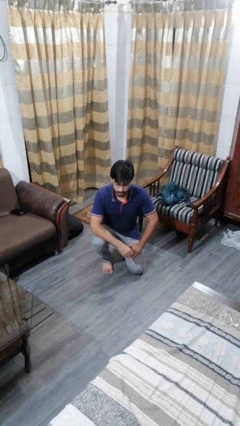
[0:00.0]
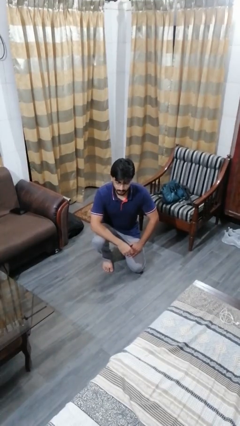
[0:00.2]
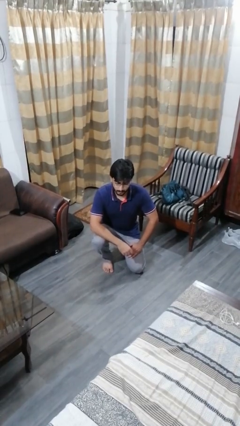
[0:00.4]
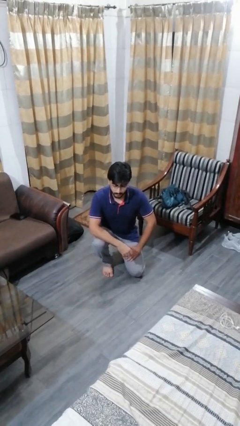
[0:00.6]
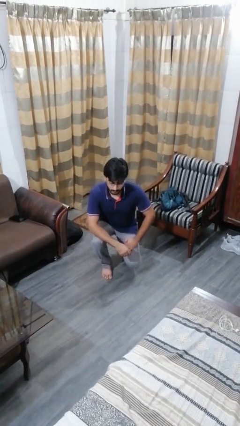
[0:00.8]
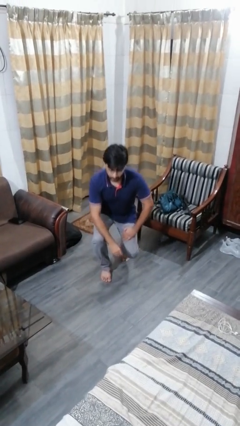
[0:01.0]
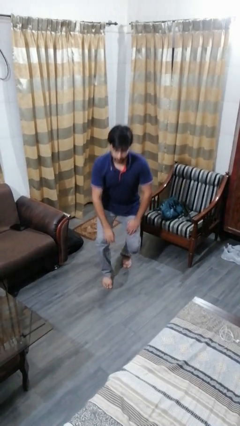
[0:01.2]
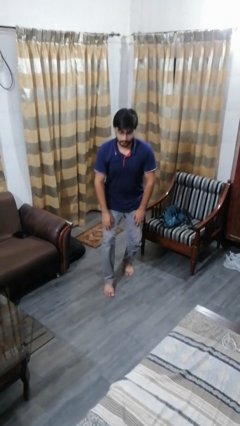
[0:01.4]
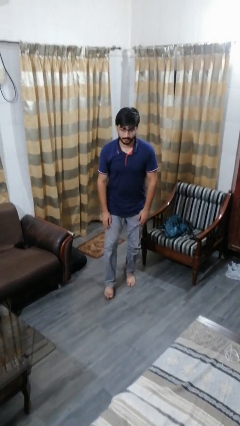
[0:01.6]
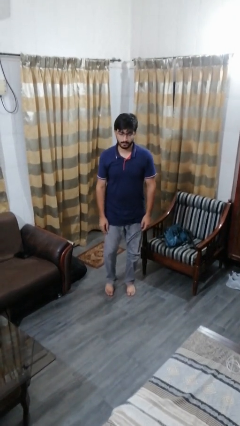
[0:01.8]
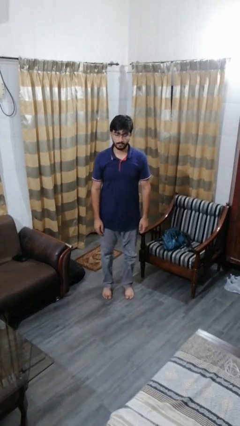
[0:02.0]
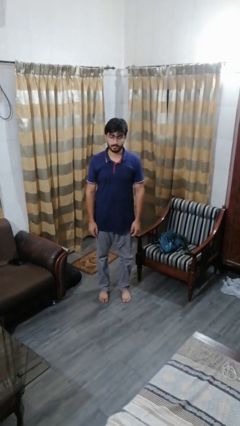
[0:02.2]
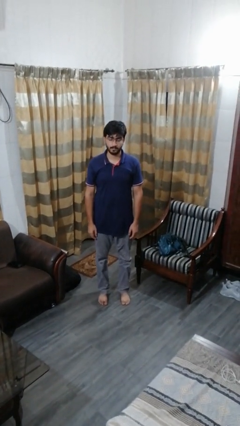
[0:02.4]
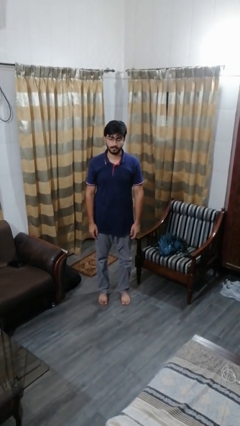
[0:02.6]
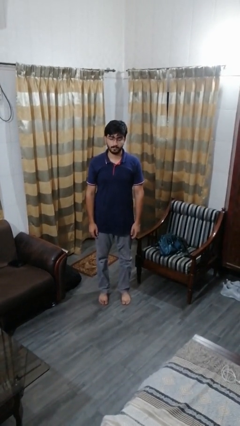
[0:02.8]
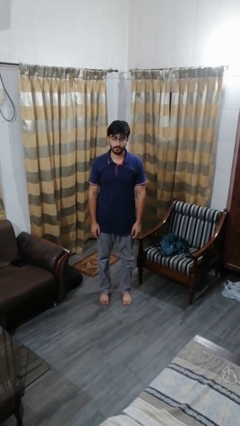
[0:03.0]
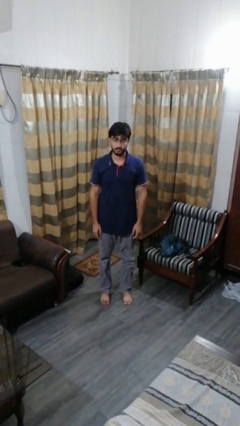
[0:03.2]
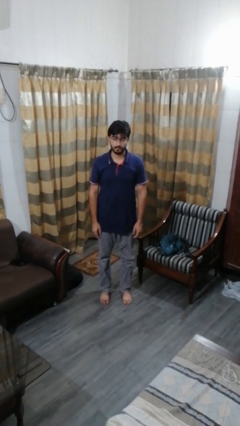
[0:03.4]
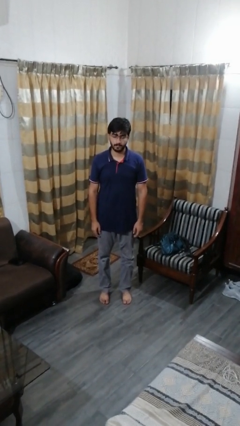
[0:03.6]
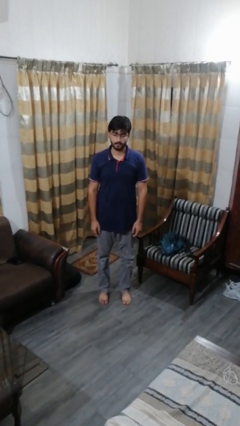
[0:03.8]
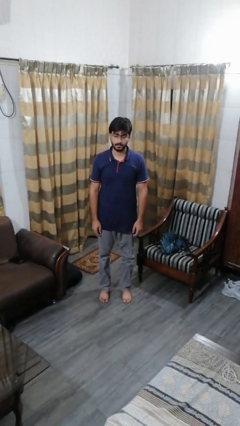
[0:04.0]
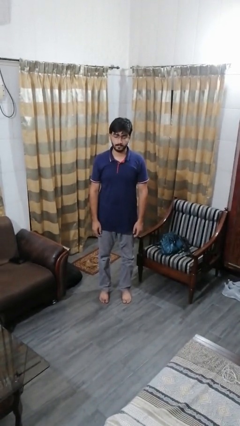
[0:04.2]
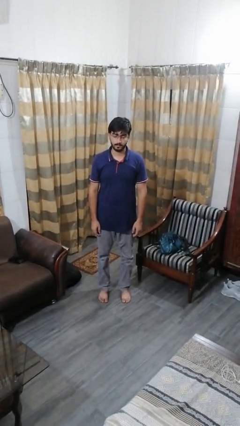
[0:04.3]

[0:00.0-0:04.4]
person stands up from floor

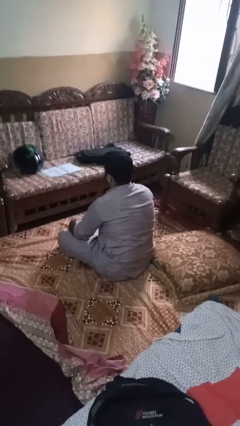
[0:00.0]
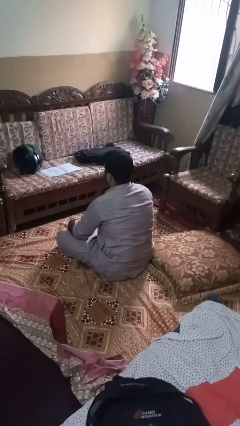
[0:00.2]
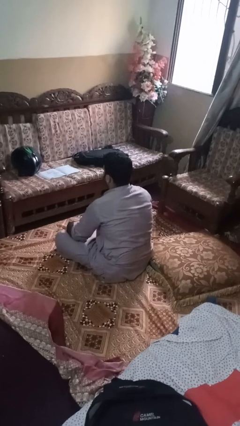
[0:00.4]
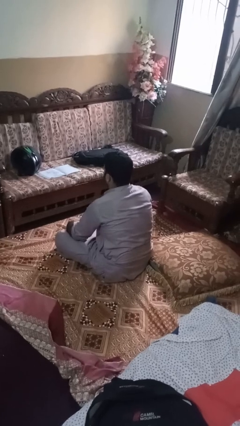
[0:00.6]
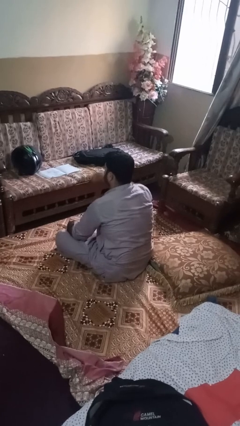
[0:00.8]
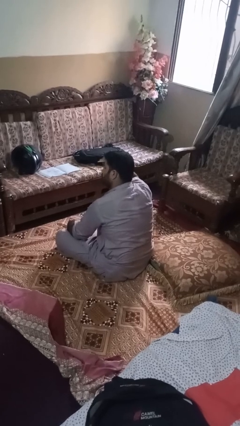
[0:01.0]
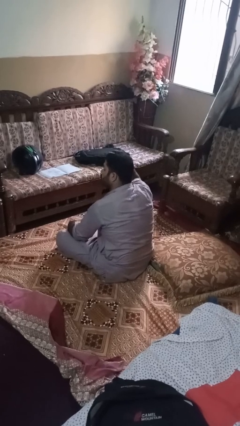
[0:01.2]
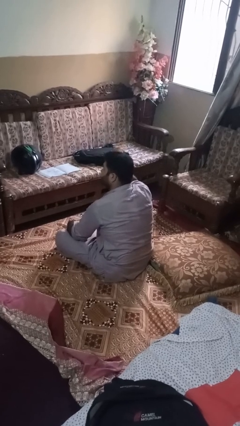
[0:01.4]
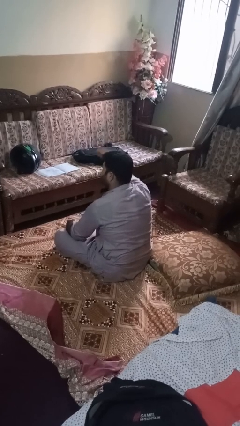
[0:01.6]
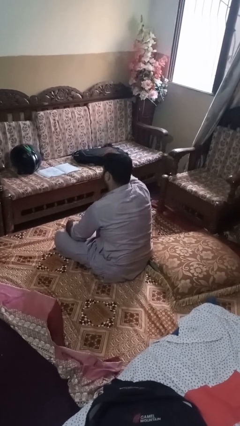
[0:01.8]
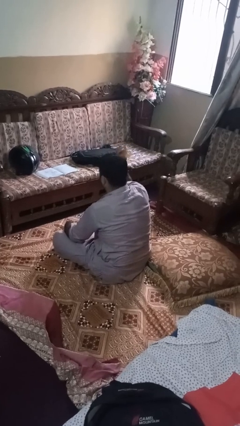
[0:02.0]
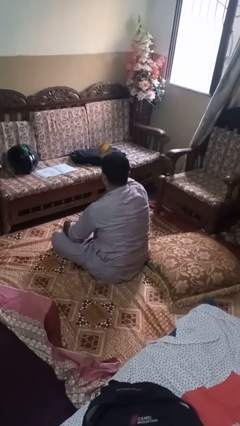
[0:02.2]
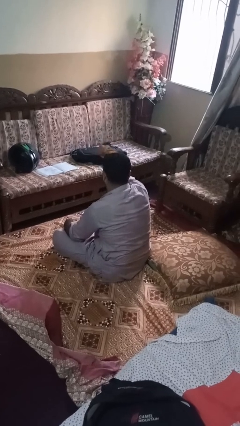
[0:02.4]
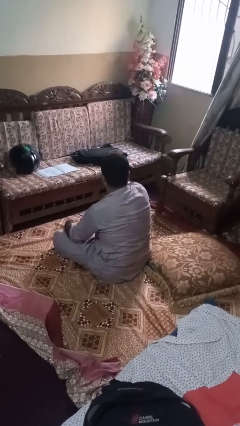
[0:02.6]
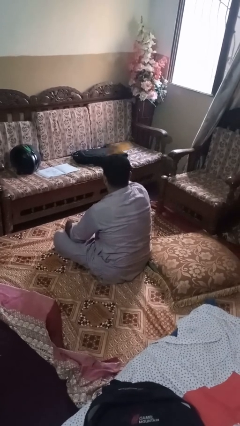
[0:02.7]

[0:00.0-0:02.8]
person brushes hair

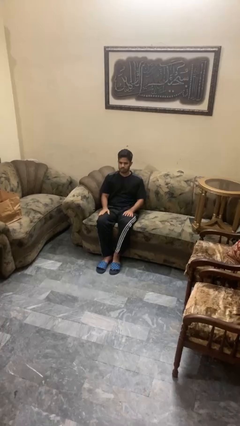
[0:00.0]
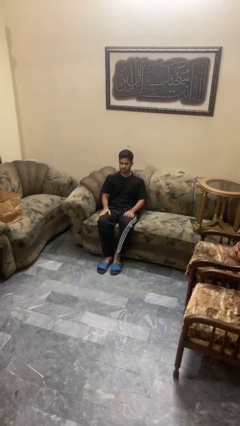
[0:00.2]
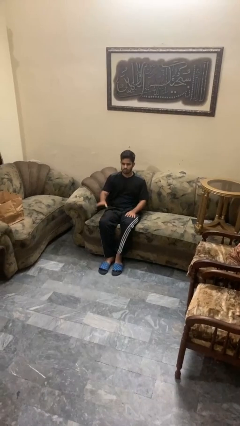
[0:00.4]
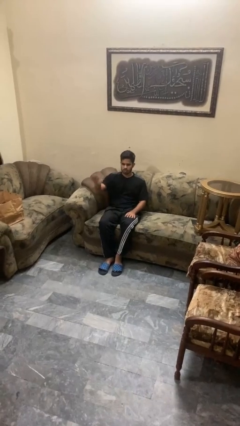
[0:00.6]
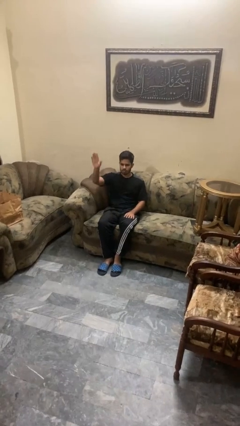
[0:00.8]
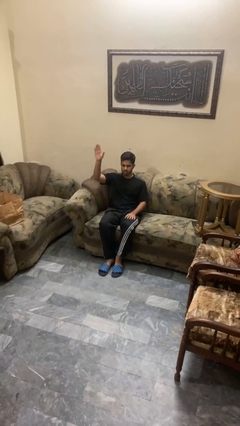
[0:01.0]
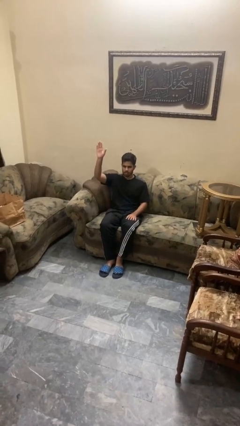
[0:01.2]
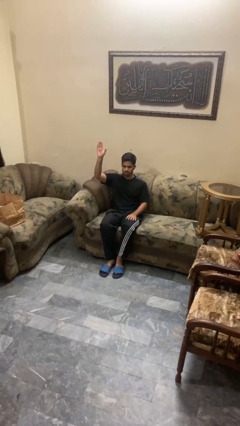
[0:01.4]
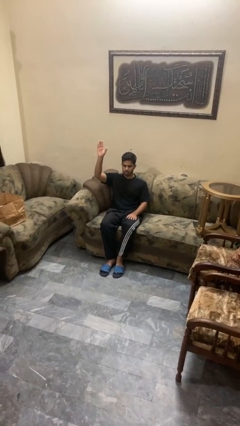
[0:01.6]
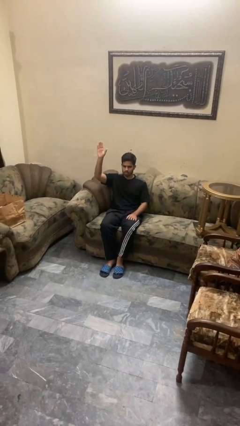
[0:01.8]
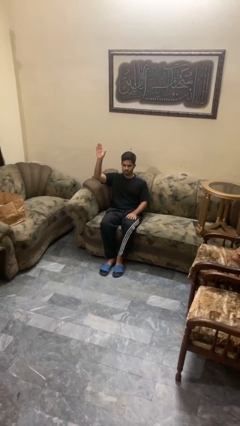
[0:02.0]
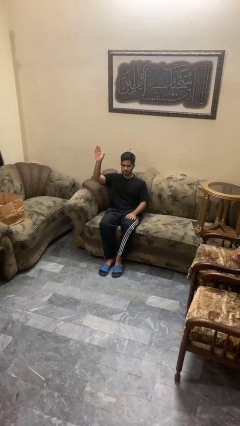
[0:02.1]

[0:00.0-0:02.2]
person gestures raise hand

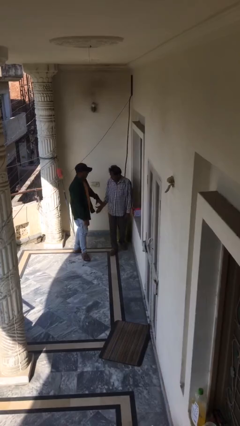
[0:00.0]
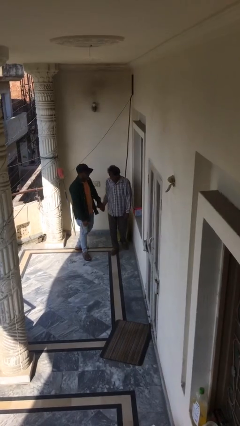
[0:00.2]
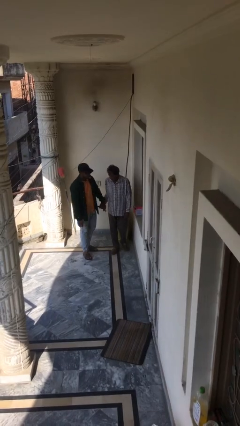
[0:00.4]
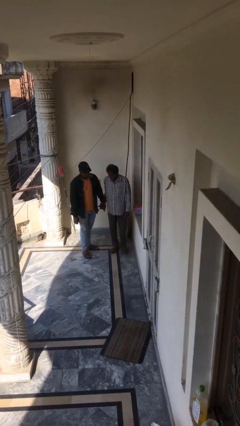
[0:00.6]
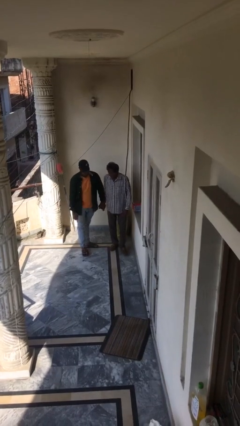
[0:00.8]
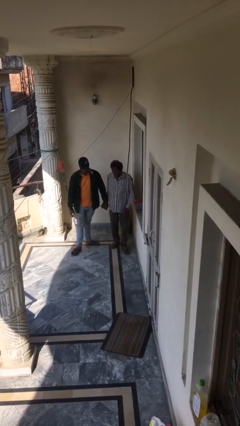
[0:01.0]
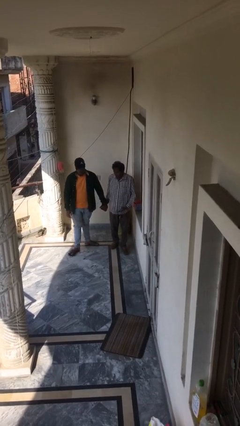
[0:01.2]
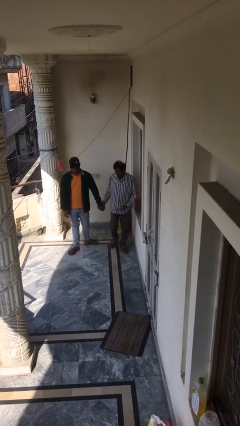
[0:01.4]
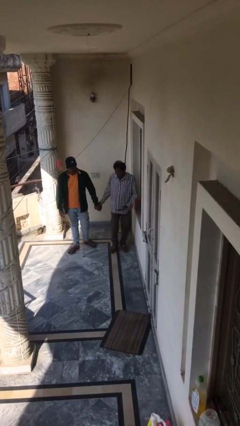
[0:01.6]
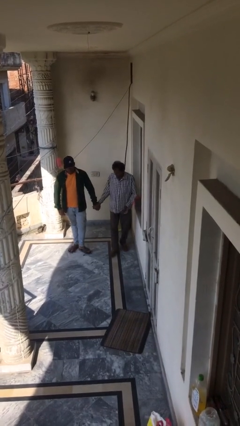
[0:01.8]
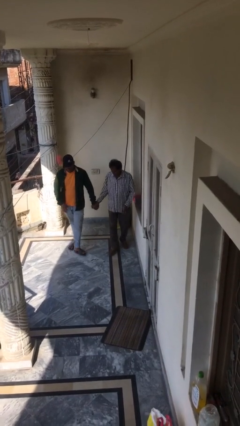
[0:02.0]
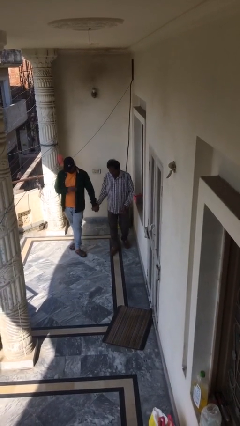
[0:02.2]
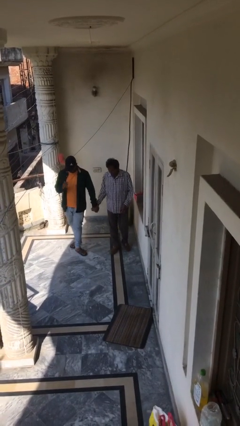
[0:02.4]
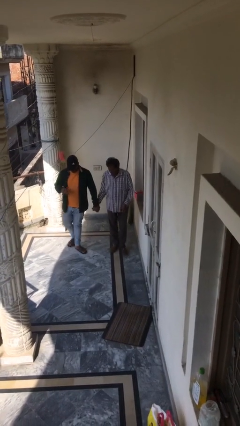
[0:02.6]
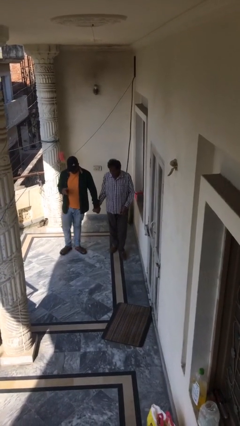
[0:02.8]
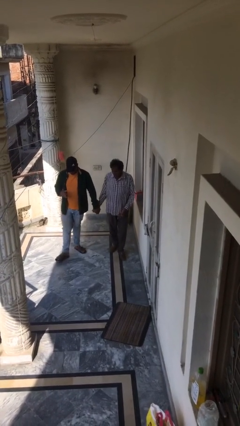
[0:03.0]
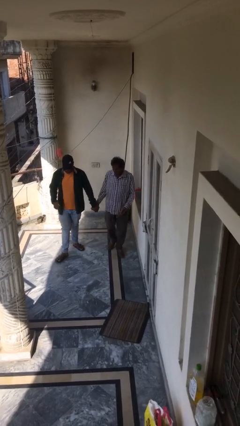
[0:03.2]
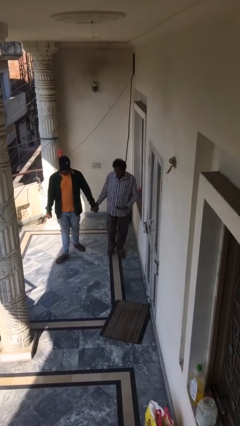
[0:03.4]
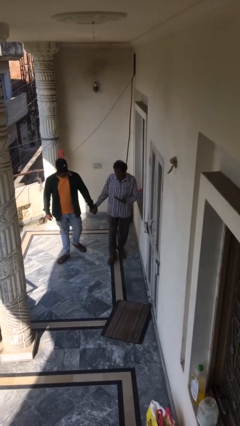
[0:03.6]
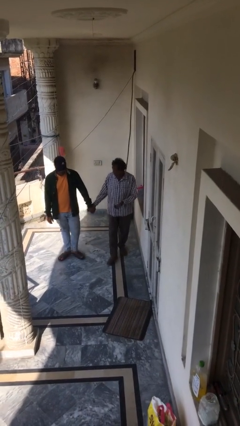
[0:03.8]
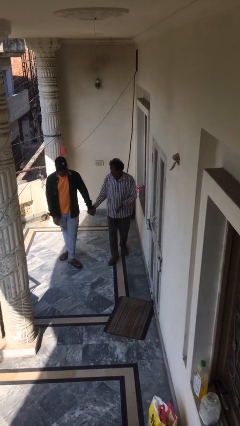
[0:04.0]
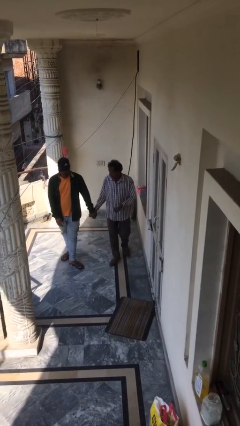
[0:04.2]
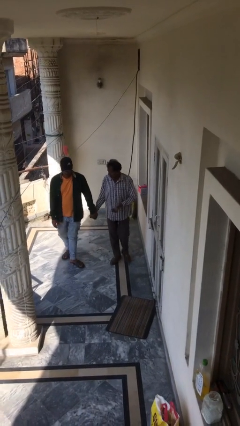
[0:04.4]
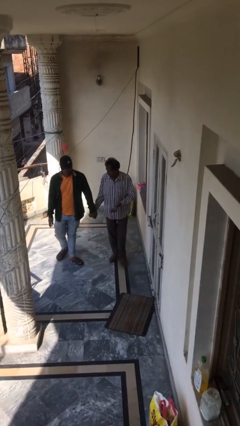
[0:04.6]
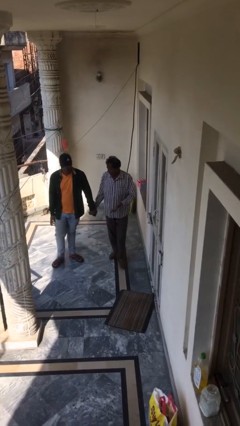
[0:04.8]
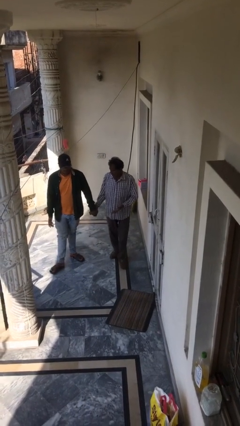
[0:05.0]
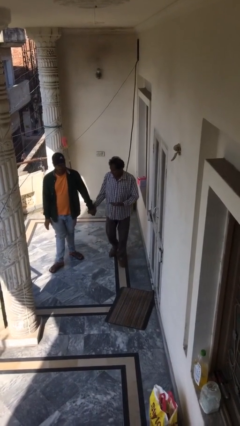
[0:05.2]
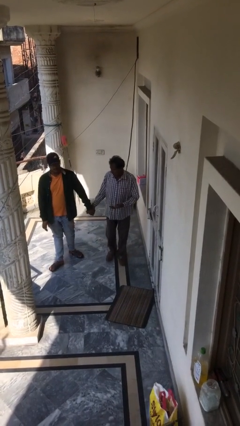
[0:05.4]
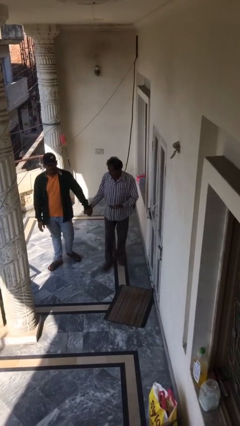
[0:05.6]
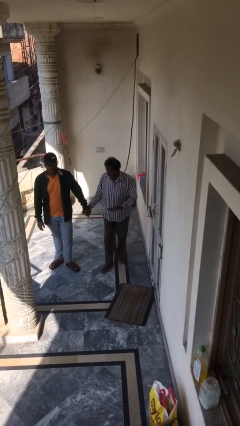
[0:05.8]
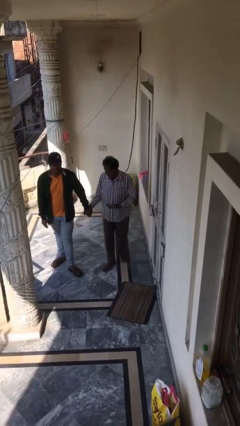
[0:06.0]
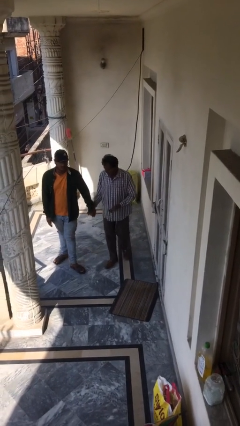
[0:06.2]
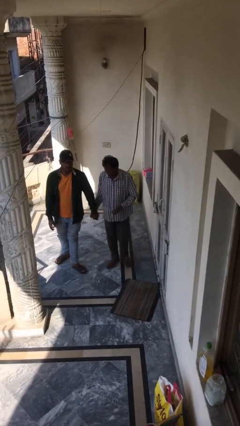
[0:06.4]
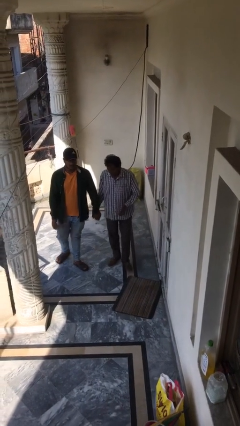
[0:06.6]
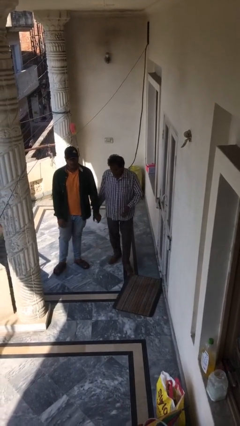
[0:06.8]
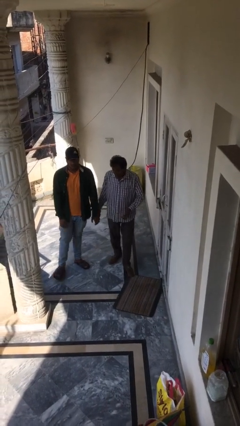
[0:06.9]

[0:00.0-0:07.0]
person holds hand

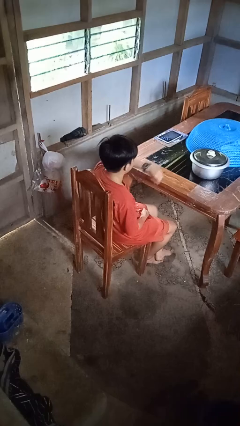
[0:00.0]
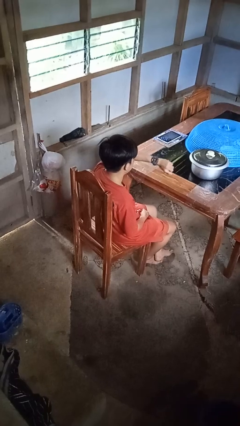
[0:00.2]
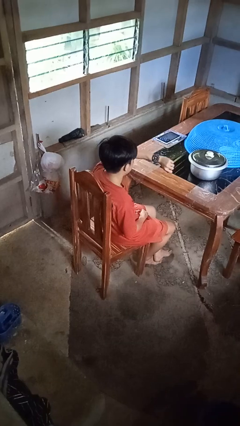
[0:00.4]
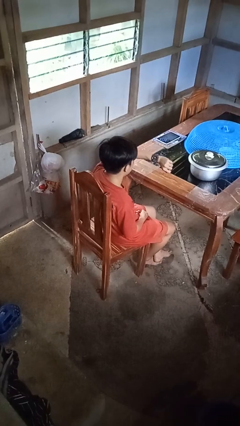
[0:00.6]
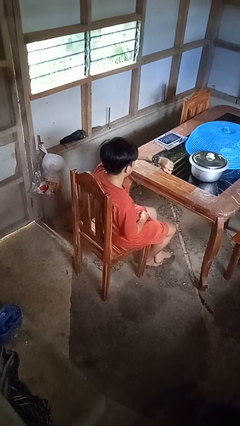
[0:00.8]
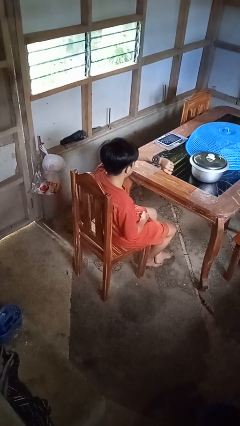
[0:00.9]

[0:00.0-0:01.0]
person looks at wristwatch

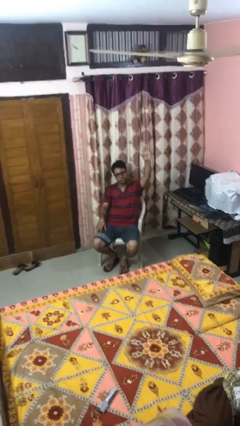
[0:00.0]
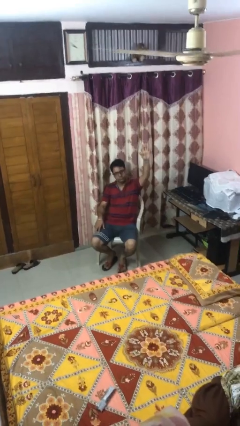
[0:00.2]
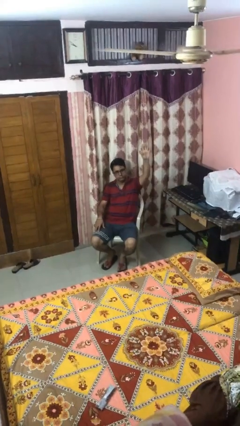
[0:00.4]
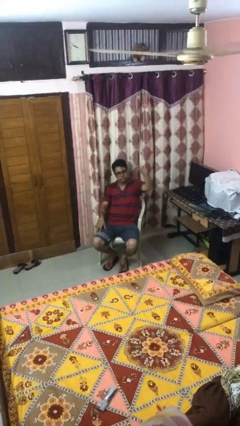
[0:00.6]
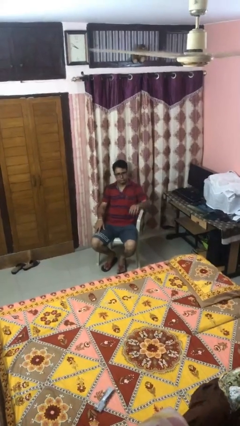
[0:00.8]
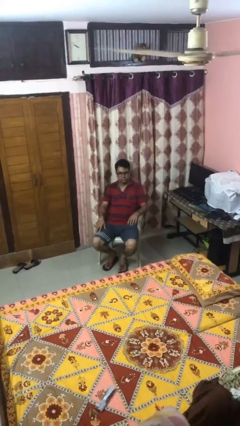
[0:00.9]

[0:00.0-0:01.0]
person gestures lower hand
